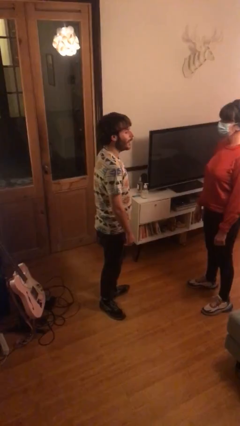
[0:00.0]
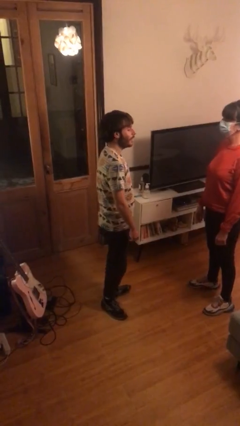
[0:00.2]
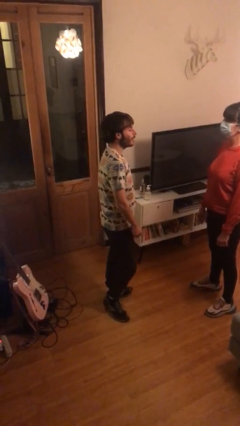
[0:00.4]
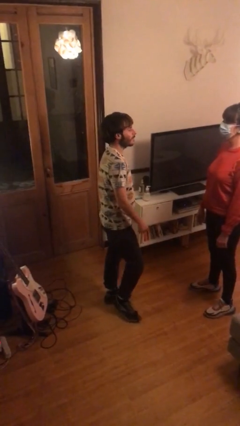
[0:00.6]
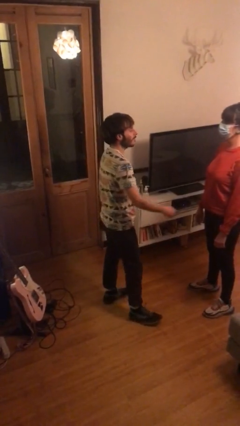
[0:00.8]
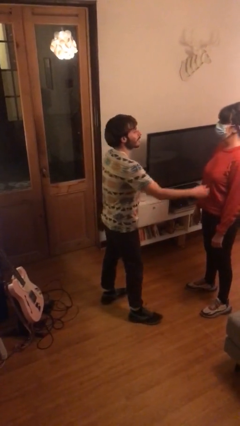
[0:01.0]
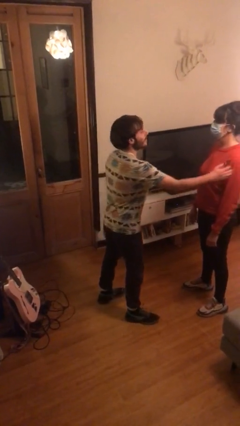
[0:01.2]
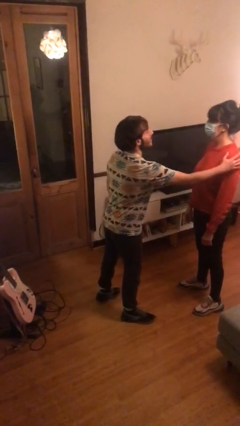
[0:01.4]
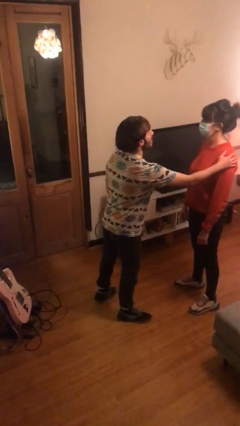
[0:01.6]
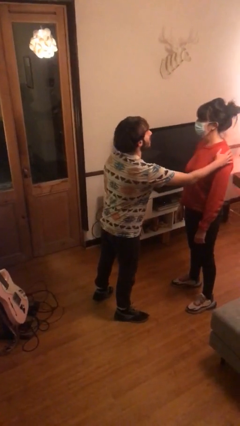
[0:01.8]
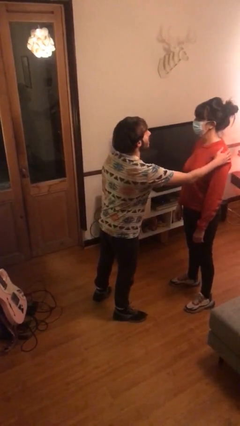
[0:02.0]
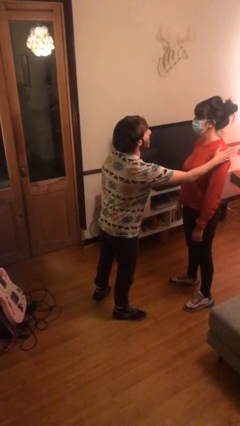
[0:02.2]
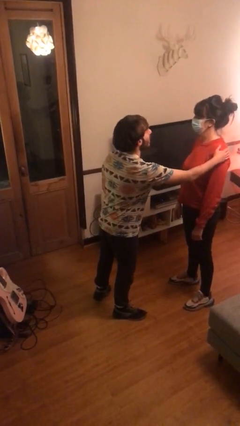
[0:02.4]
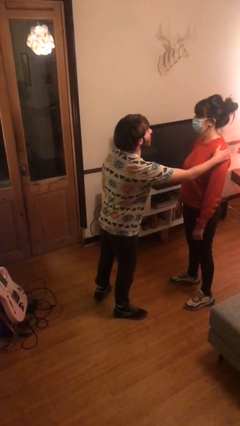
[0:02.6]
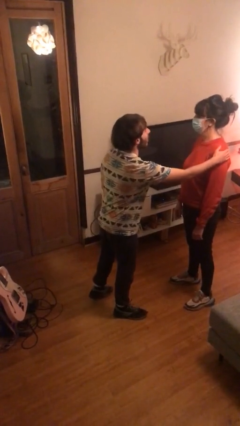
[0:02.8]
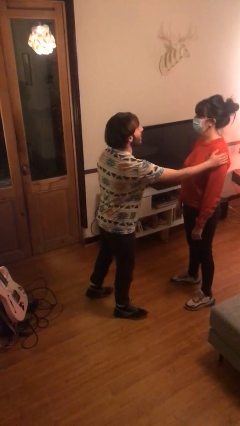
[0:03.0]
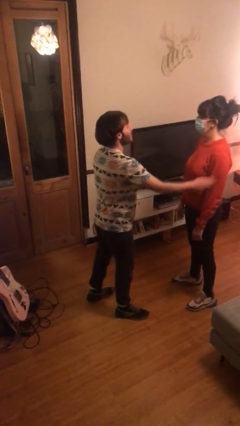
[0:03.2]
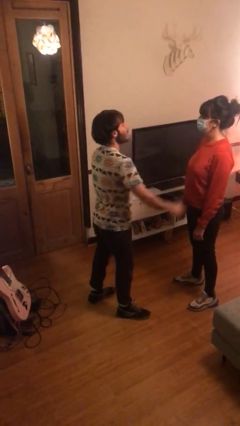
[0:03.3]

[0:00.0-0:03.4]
person pounds shoulders of person

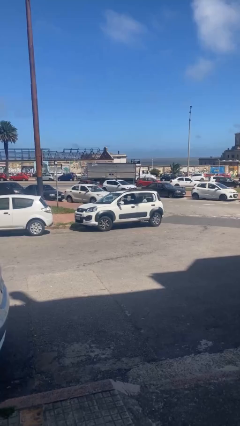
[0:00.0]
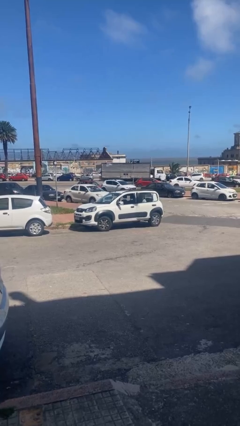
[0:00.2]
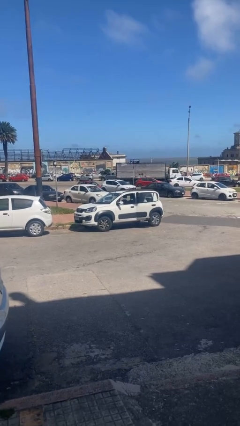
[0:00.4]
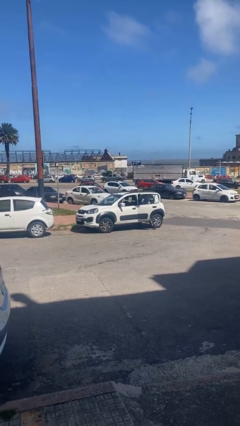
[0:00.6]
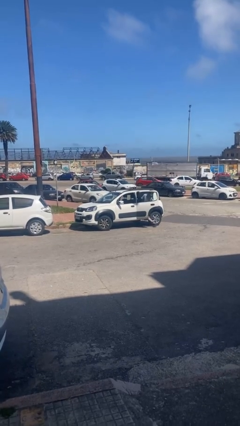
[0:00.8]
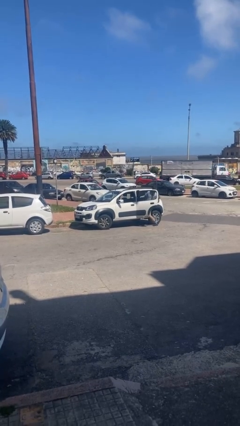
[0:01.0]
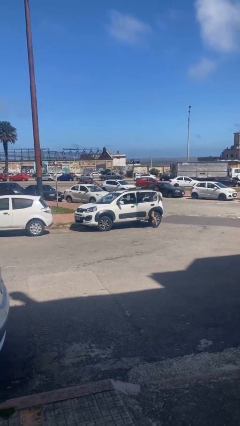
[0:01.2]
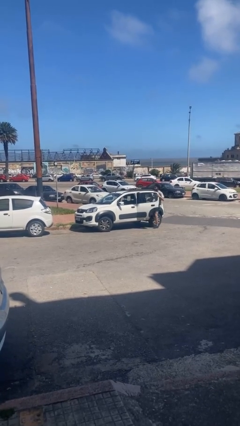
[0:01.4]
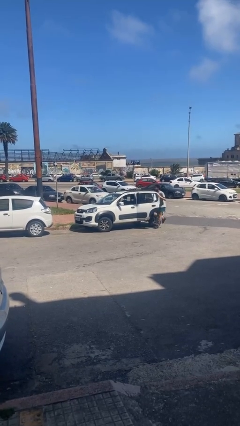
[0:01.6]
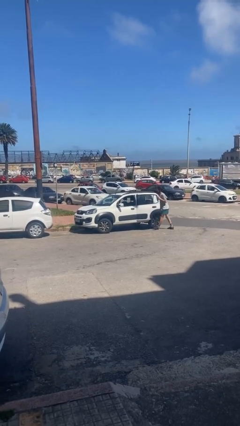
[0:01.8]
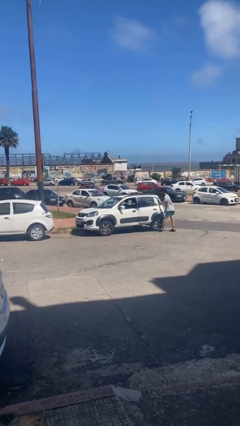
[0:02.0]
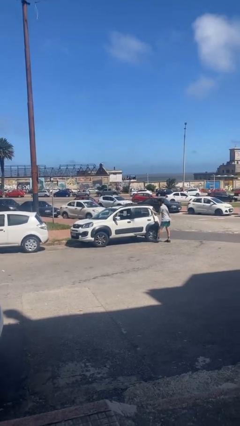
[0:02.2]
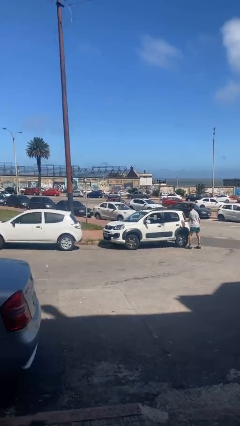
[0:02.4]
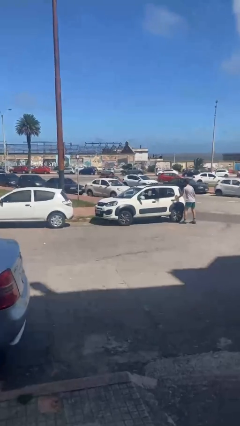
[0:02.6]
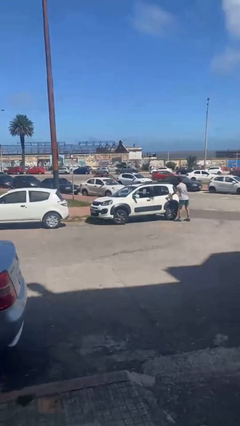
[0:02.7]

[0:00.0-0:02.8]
car drops off person

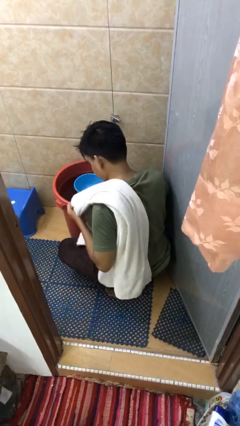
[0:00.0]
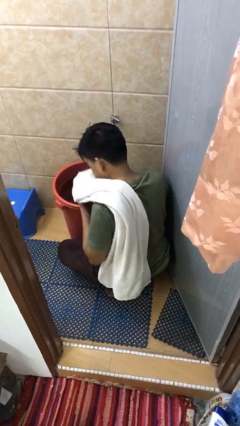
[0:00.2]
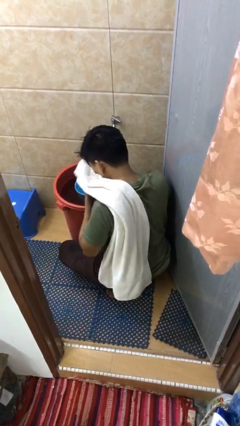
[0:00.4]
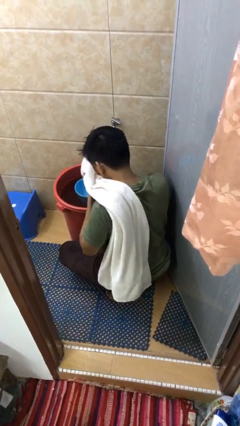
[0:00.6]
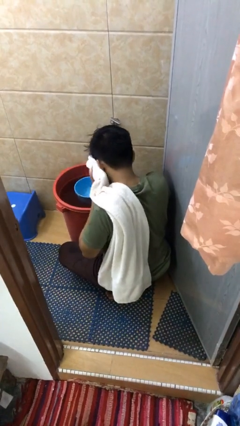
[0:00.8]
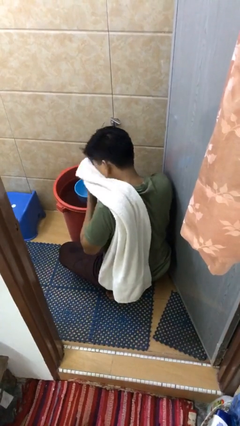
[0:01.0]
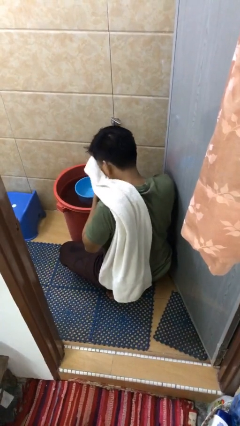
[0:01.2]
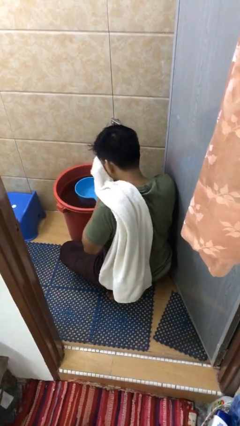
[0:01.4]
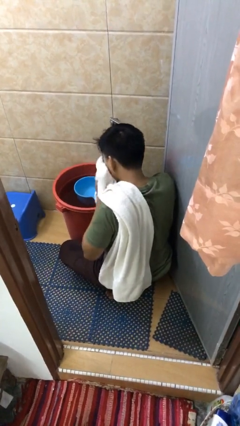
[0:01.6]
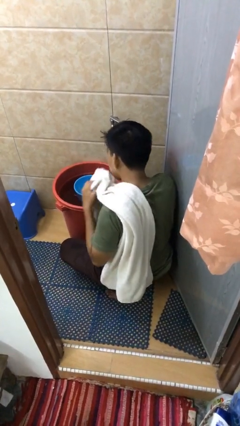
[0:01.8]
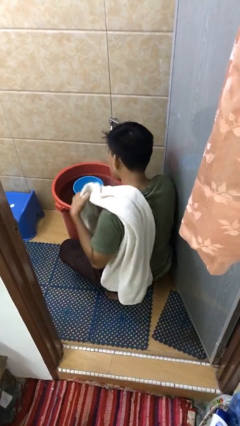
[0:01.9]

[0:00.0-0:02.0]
person dries face with towel

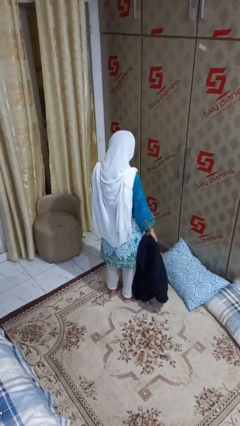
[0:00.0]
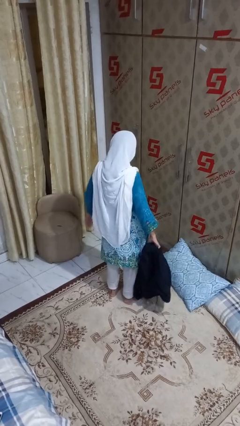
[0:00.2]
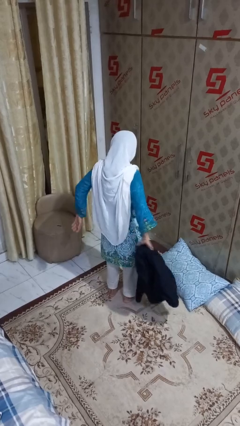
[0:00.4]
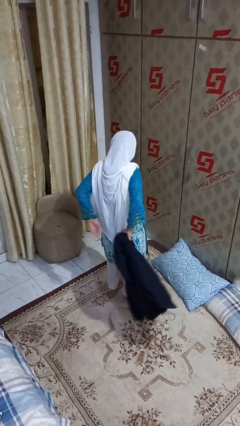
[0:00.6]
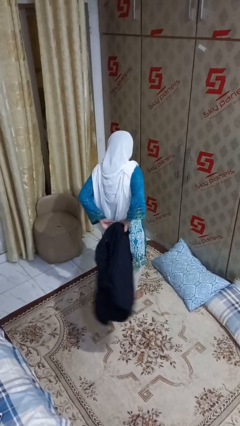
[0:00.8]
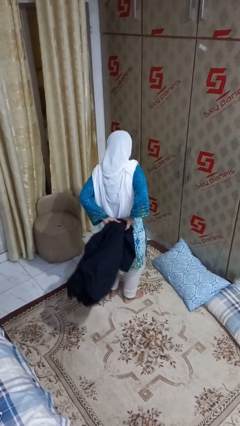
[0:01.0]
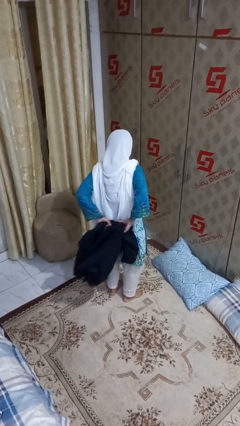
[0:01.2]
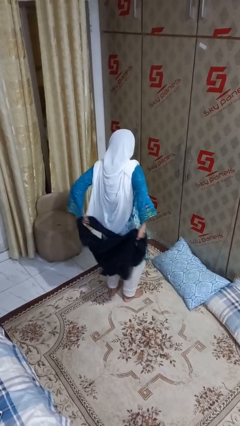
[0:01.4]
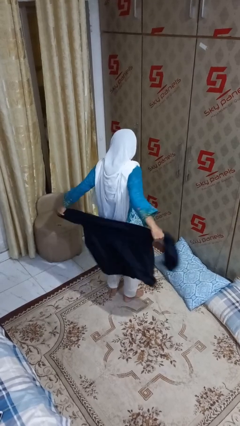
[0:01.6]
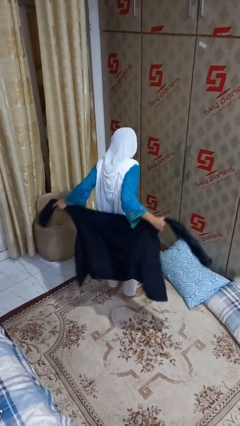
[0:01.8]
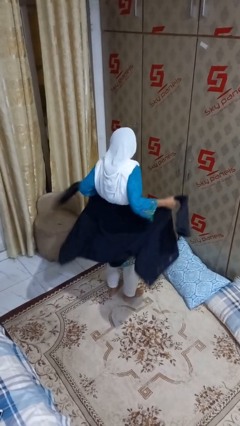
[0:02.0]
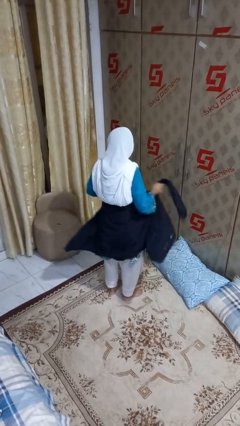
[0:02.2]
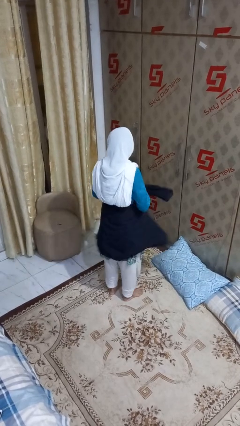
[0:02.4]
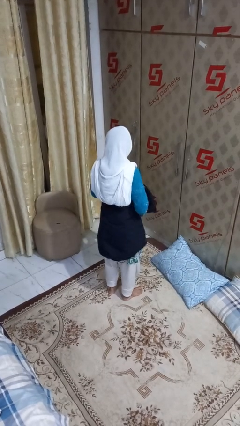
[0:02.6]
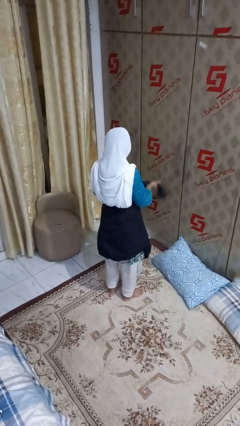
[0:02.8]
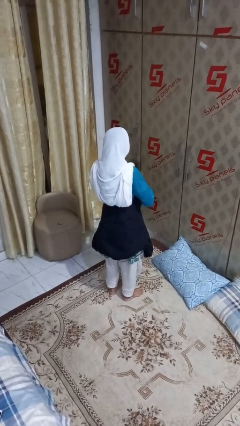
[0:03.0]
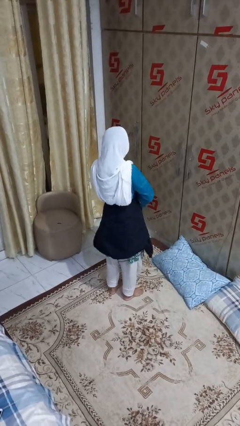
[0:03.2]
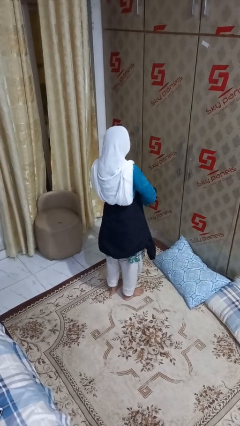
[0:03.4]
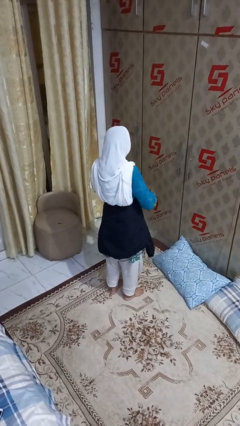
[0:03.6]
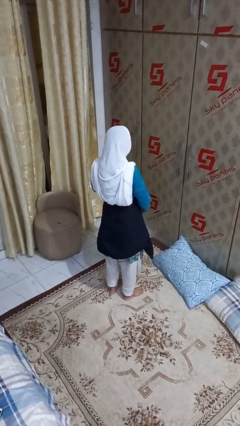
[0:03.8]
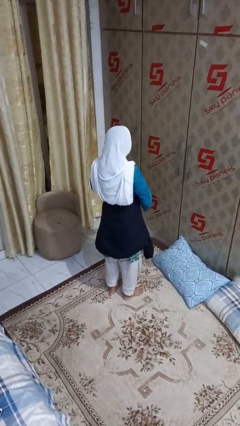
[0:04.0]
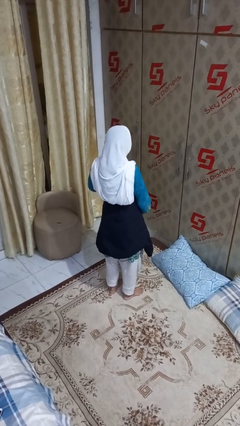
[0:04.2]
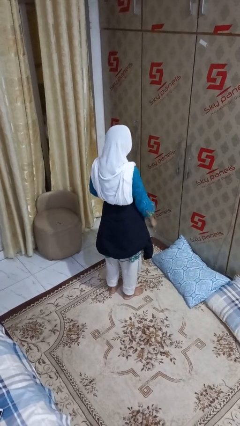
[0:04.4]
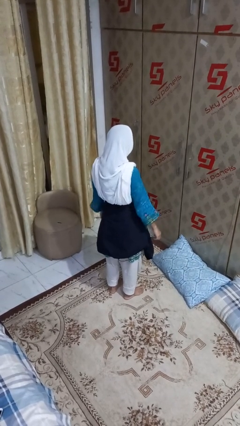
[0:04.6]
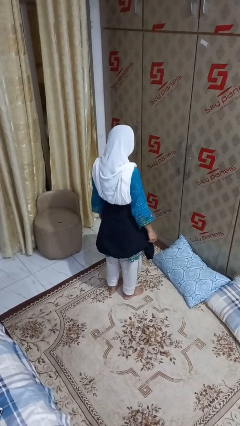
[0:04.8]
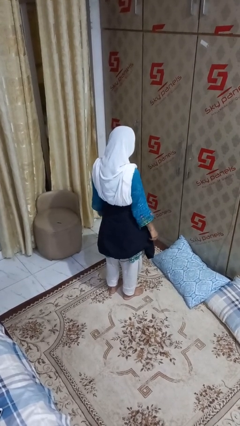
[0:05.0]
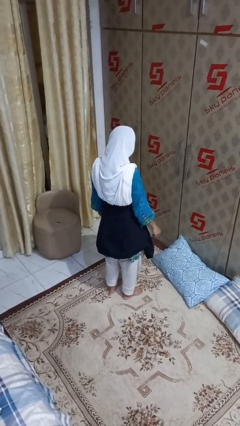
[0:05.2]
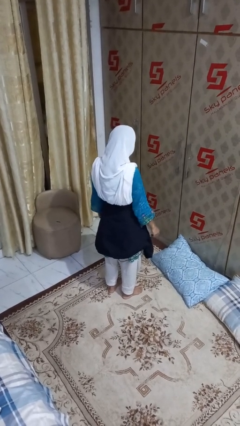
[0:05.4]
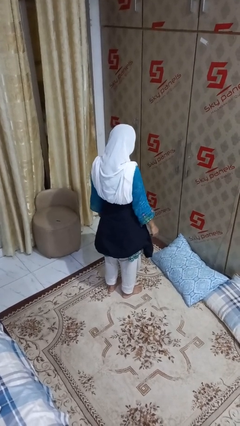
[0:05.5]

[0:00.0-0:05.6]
person ties jacket around waist

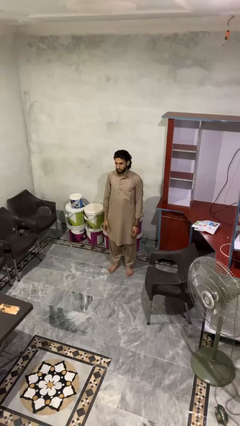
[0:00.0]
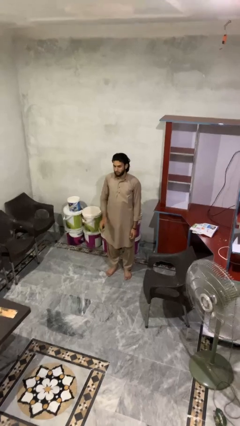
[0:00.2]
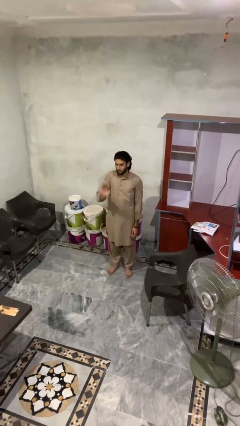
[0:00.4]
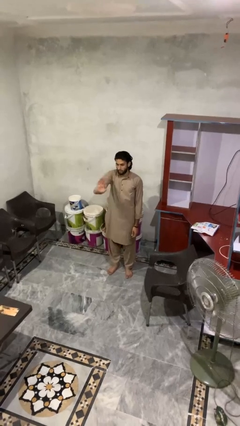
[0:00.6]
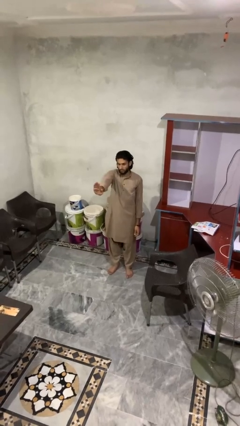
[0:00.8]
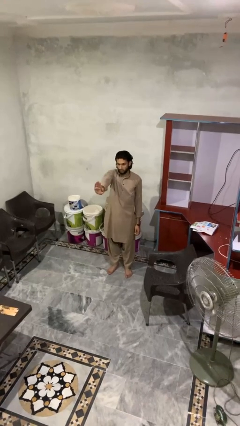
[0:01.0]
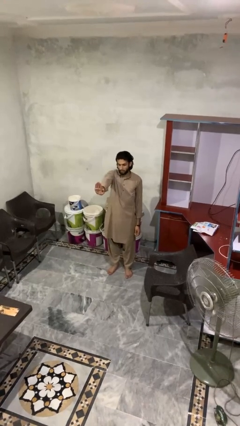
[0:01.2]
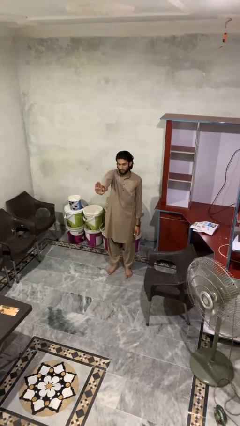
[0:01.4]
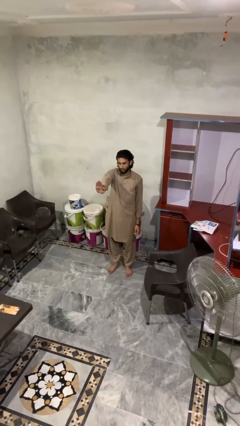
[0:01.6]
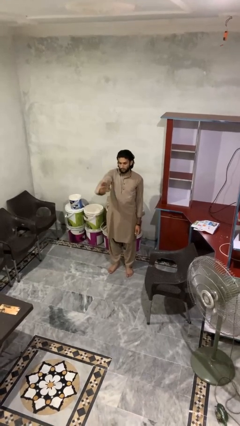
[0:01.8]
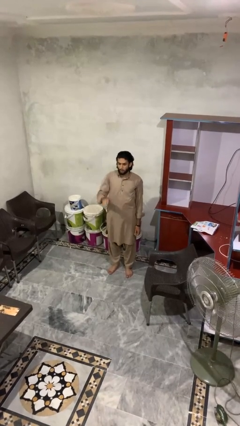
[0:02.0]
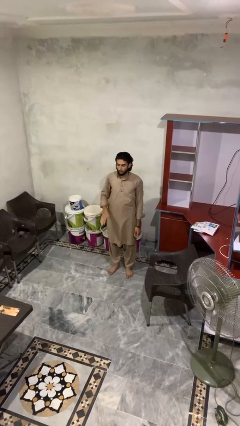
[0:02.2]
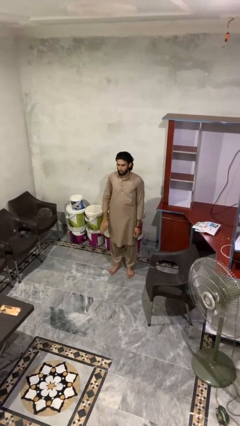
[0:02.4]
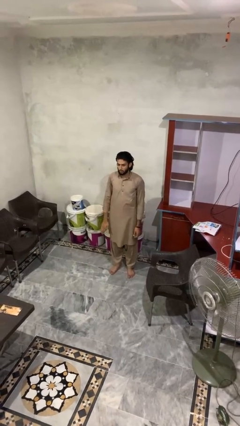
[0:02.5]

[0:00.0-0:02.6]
person gestures stop

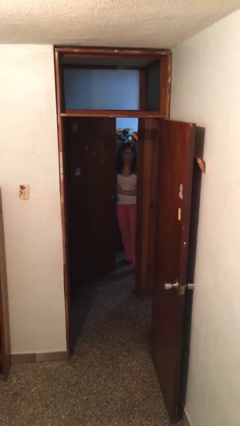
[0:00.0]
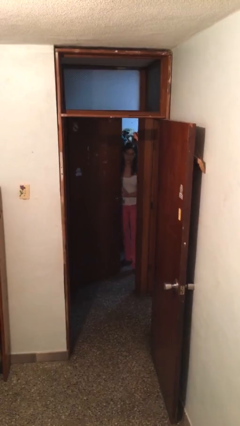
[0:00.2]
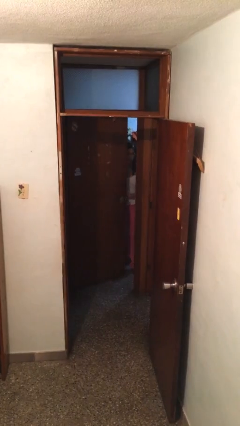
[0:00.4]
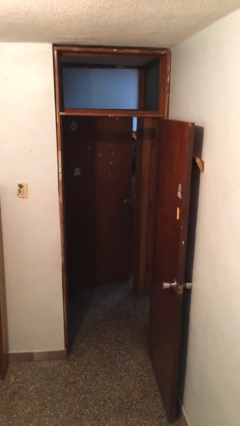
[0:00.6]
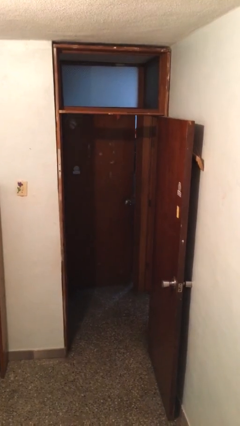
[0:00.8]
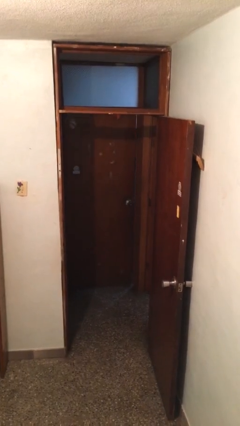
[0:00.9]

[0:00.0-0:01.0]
person closes facility door

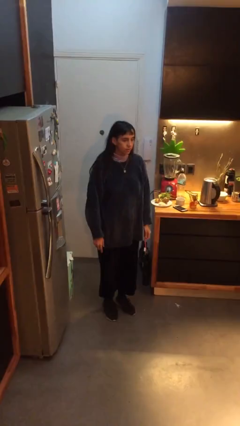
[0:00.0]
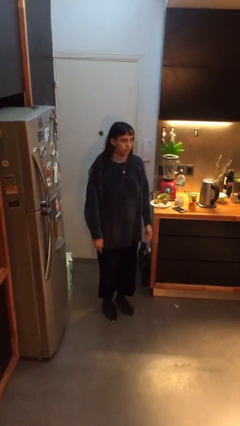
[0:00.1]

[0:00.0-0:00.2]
person brushes teeth
